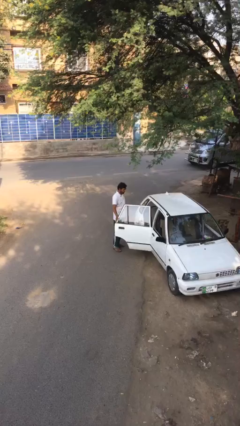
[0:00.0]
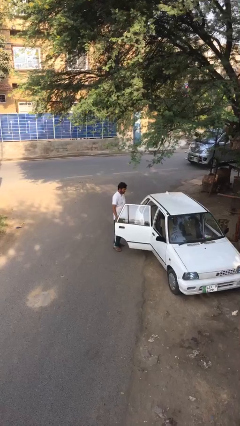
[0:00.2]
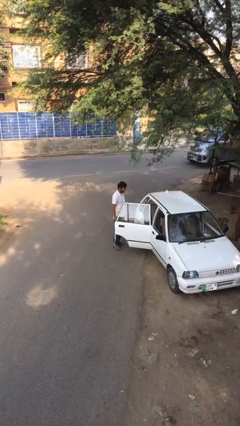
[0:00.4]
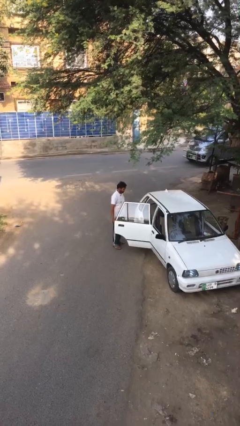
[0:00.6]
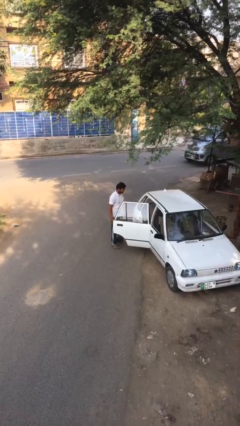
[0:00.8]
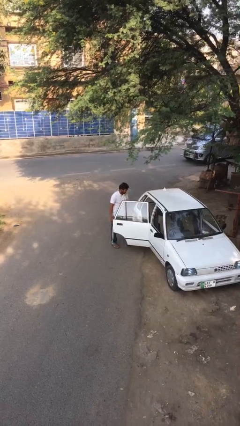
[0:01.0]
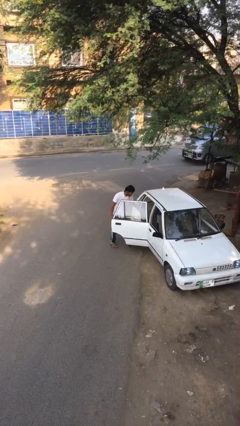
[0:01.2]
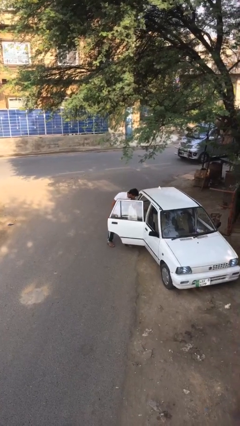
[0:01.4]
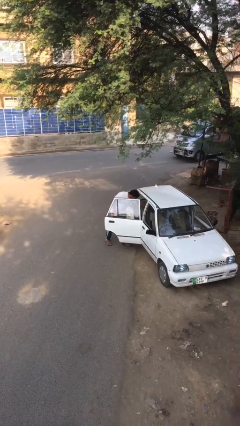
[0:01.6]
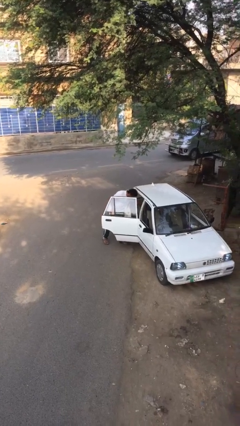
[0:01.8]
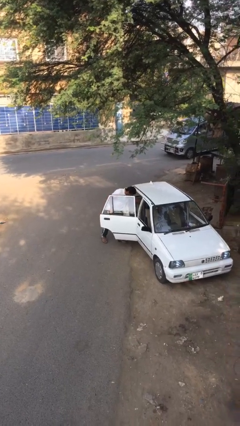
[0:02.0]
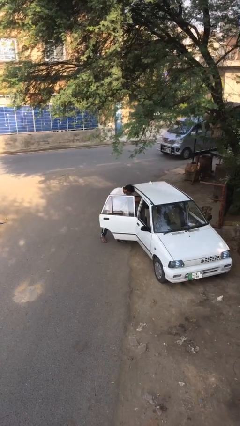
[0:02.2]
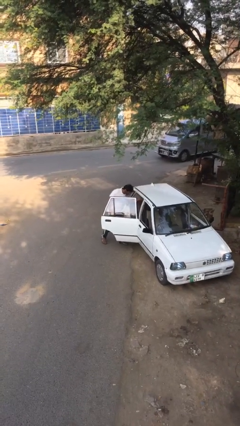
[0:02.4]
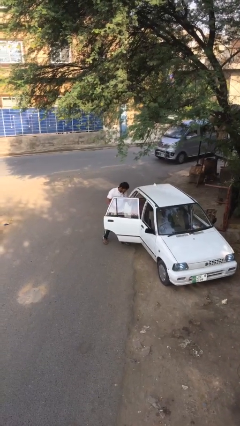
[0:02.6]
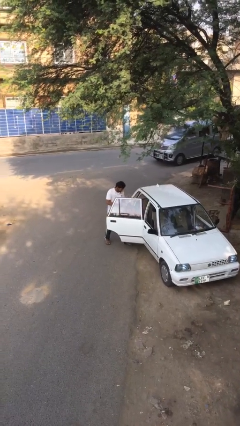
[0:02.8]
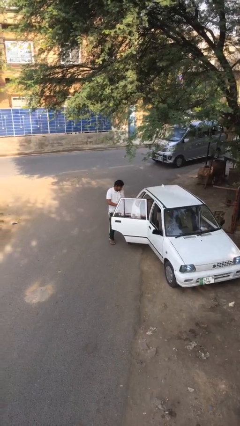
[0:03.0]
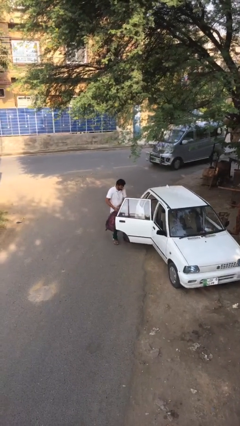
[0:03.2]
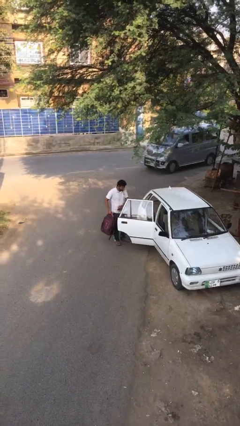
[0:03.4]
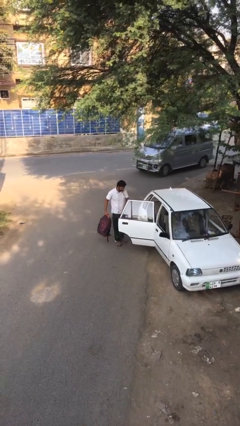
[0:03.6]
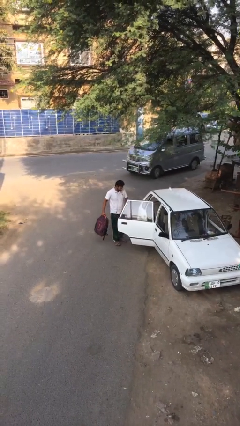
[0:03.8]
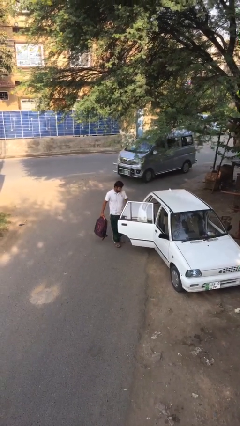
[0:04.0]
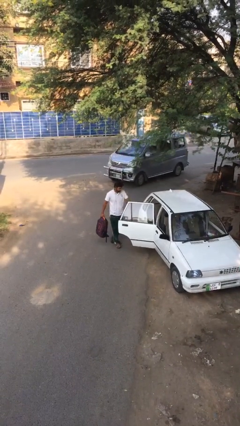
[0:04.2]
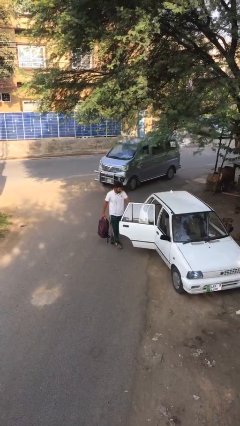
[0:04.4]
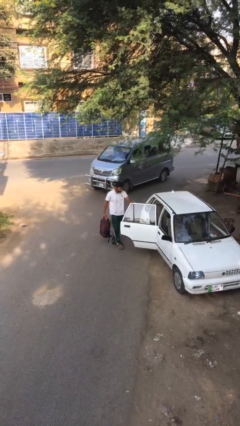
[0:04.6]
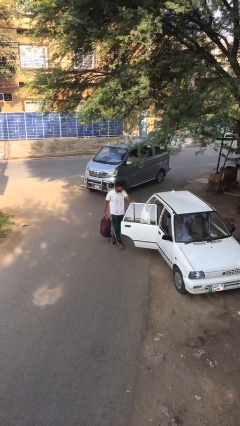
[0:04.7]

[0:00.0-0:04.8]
person unloads car

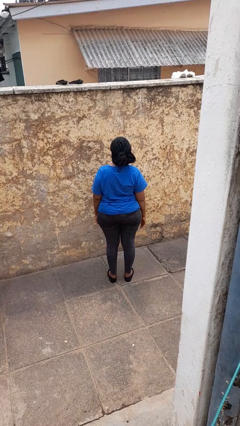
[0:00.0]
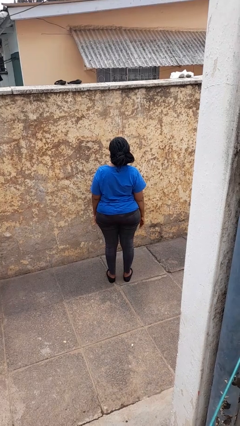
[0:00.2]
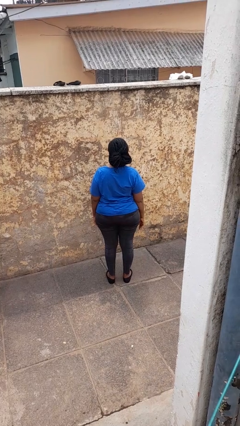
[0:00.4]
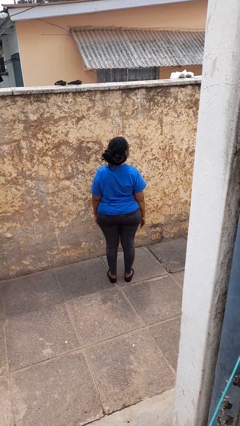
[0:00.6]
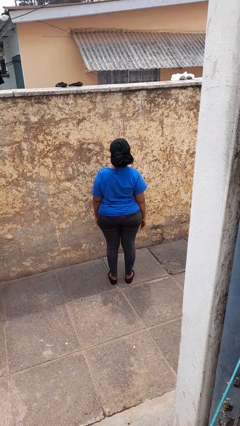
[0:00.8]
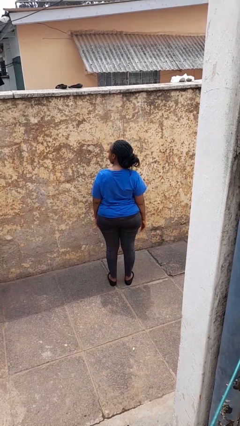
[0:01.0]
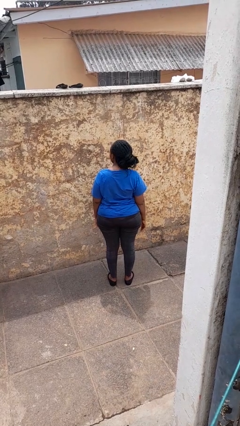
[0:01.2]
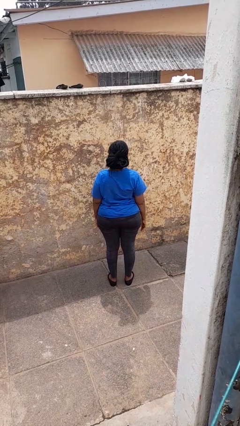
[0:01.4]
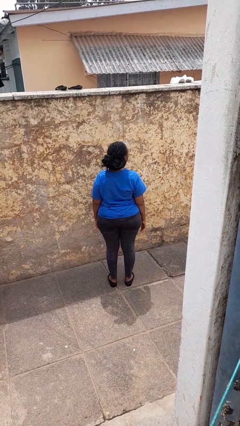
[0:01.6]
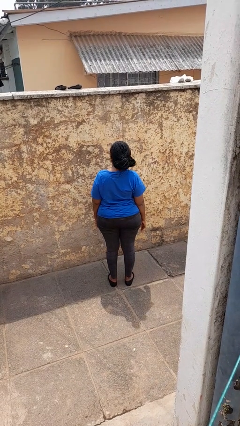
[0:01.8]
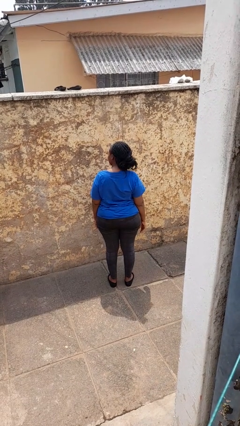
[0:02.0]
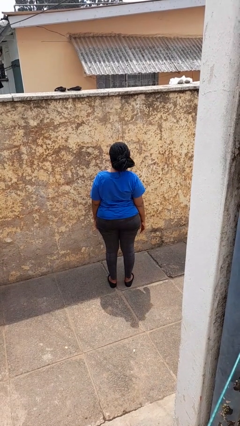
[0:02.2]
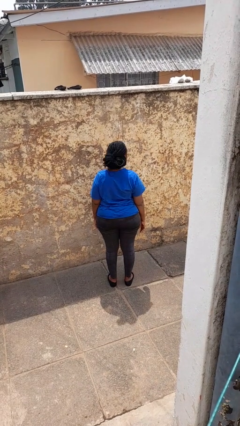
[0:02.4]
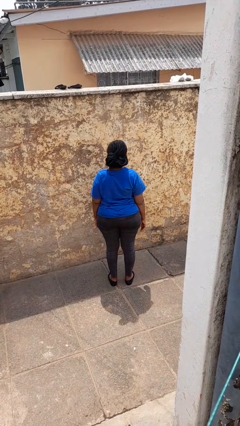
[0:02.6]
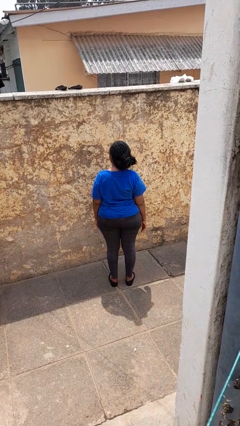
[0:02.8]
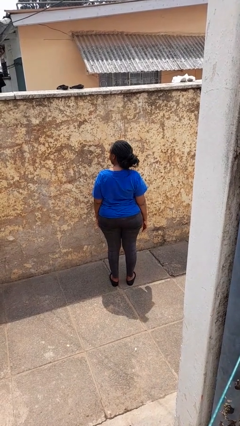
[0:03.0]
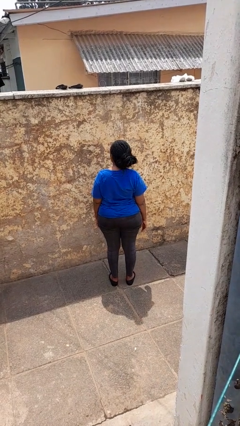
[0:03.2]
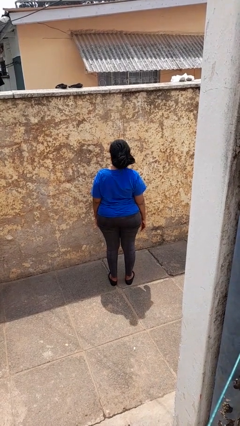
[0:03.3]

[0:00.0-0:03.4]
person shakes head

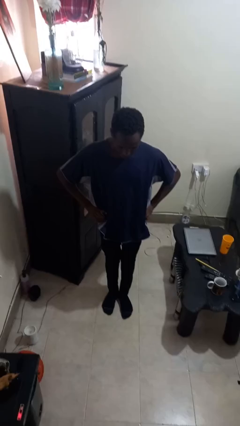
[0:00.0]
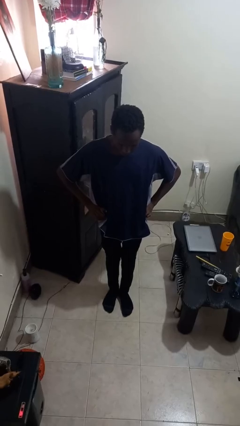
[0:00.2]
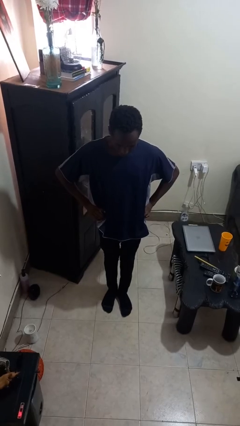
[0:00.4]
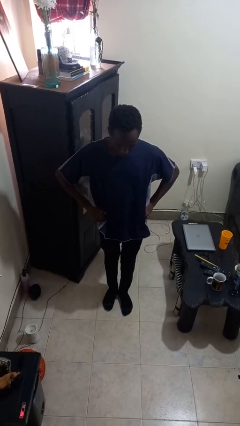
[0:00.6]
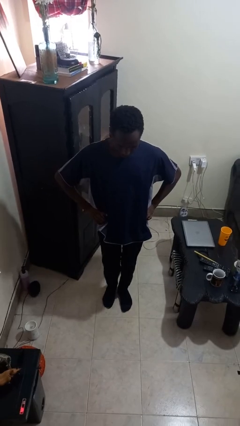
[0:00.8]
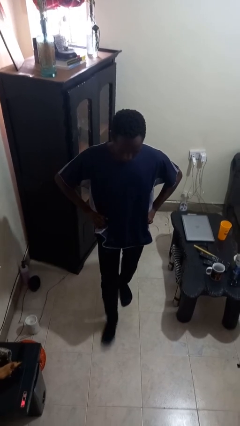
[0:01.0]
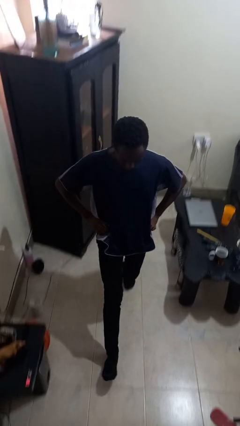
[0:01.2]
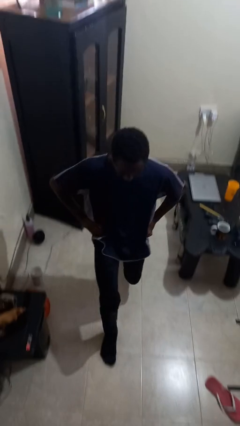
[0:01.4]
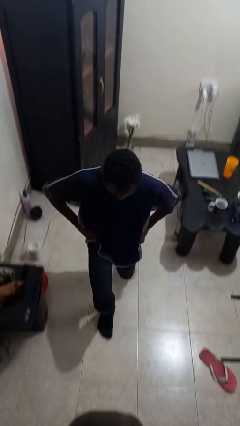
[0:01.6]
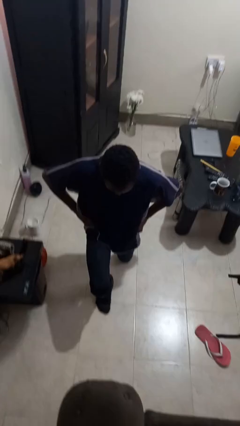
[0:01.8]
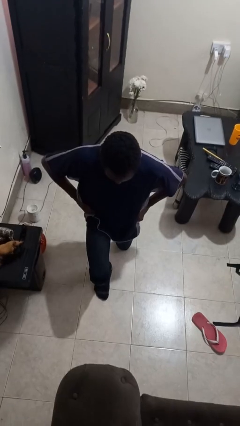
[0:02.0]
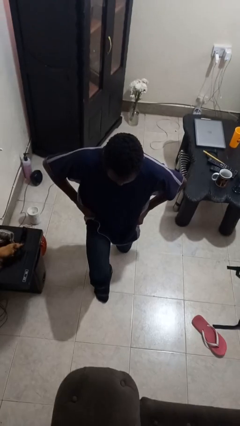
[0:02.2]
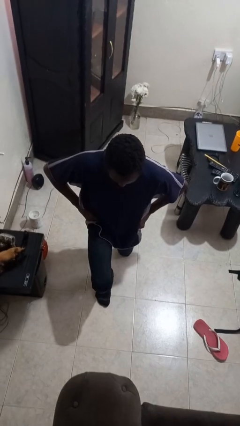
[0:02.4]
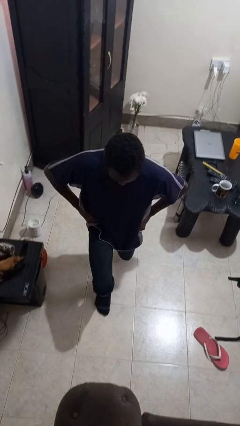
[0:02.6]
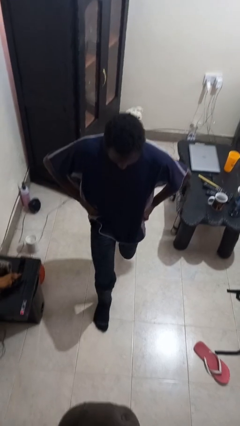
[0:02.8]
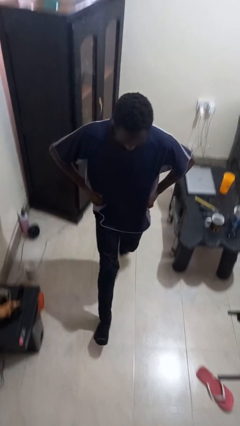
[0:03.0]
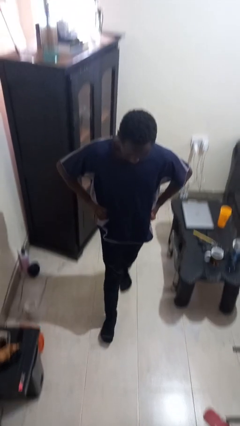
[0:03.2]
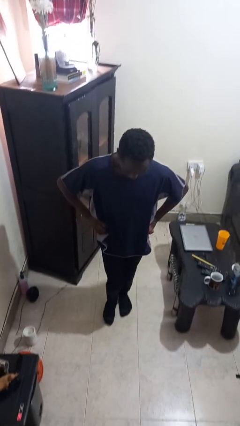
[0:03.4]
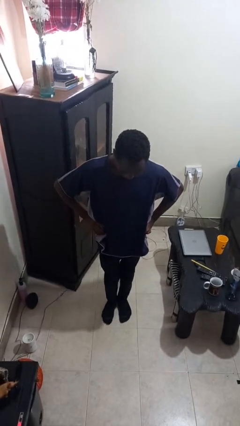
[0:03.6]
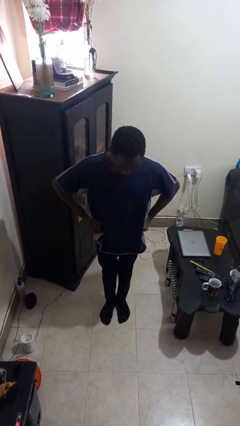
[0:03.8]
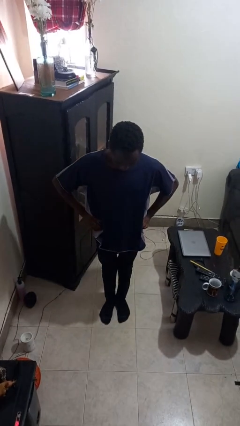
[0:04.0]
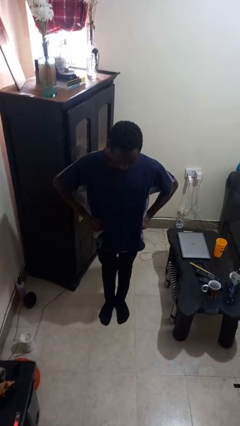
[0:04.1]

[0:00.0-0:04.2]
person exercises with lunges

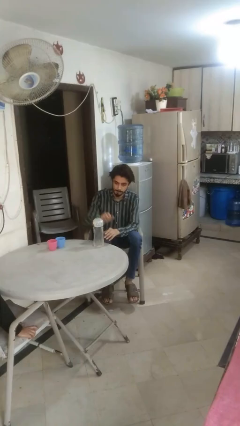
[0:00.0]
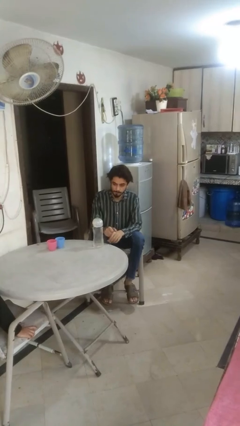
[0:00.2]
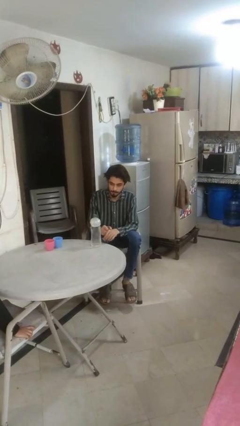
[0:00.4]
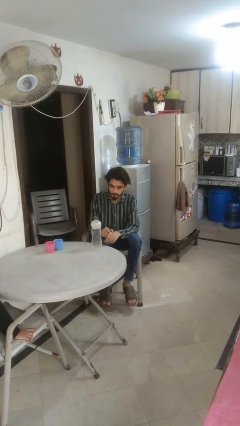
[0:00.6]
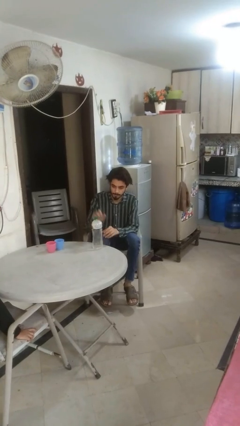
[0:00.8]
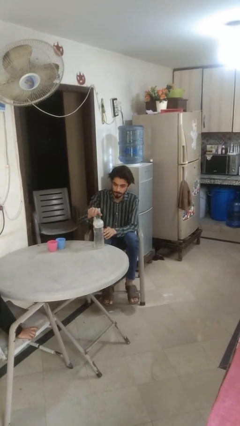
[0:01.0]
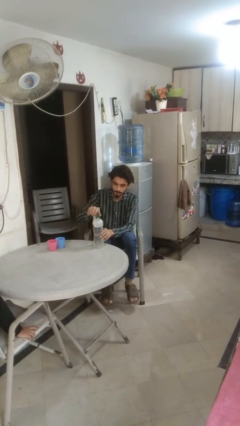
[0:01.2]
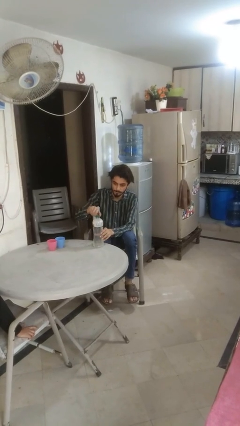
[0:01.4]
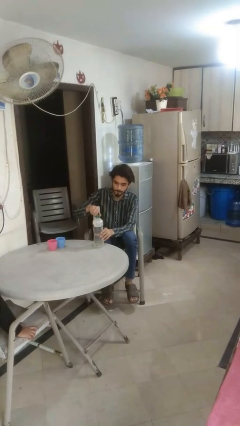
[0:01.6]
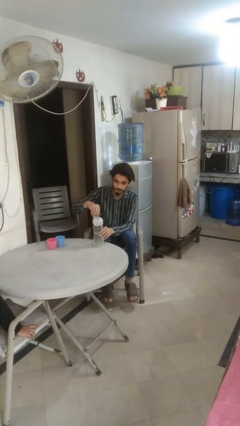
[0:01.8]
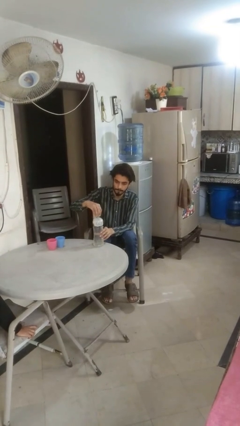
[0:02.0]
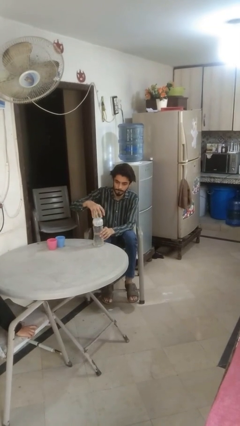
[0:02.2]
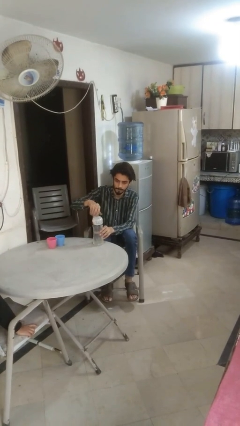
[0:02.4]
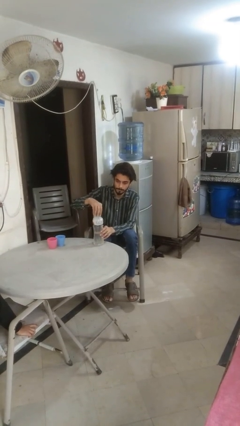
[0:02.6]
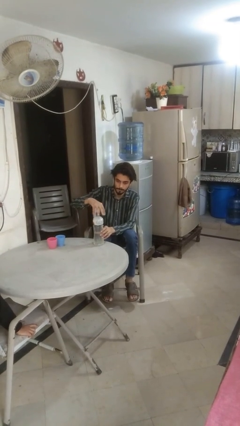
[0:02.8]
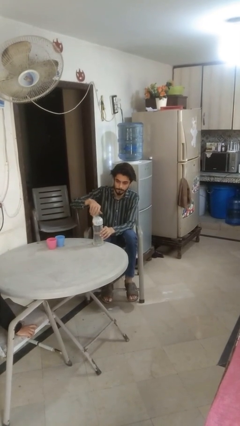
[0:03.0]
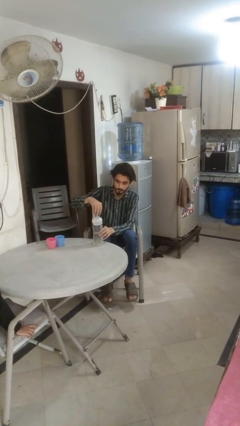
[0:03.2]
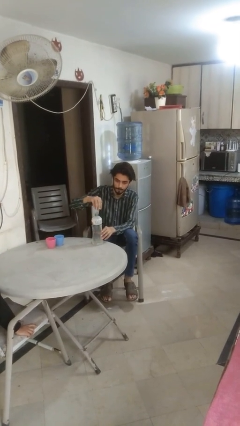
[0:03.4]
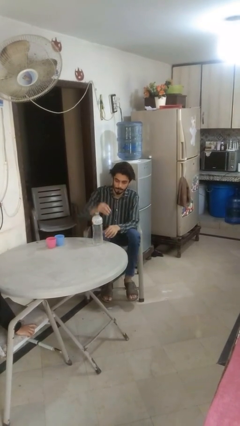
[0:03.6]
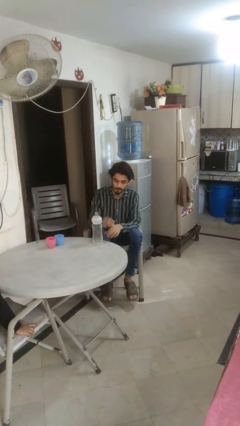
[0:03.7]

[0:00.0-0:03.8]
person unscrews lid from bottle

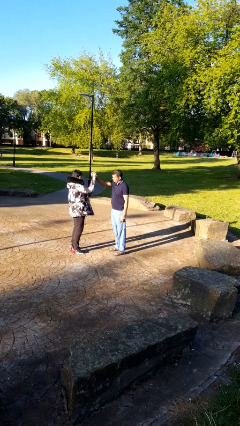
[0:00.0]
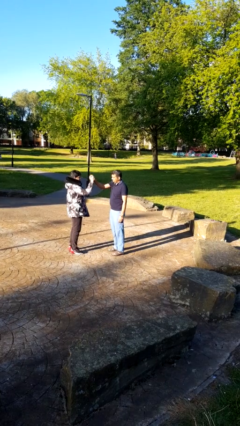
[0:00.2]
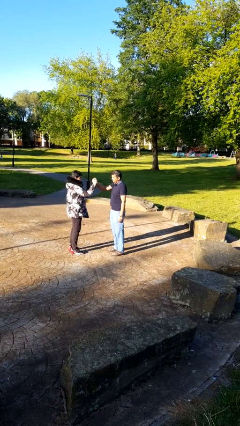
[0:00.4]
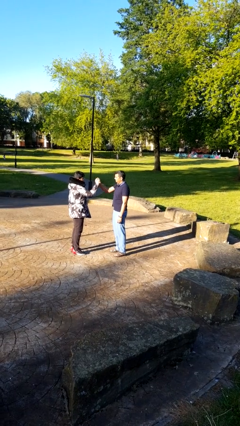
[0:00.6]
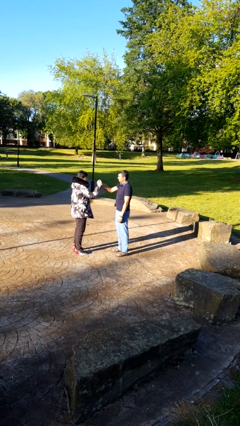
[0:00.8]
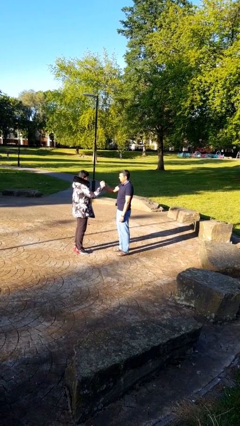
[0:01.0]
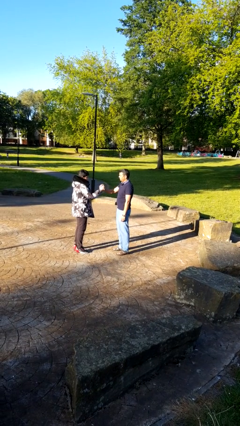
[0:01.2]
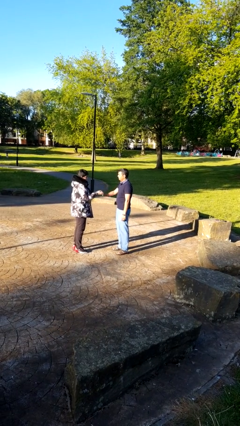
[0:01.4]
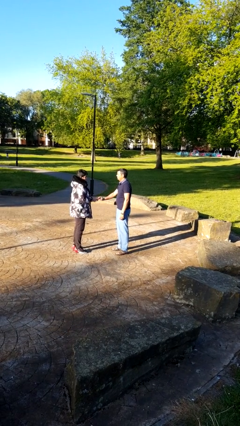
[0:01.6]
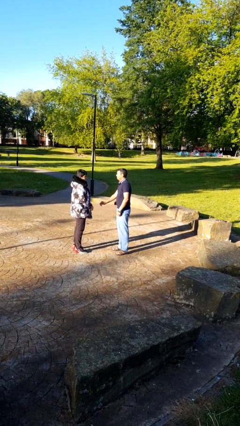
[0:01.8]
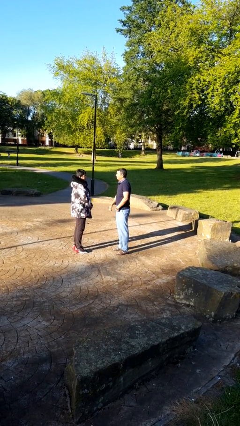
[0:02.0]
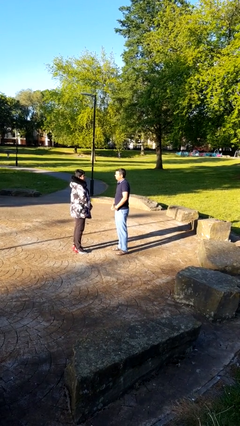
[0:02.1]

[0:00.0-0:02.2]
person highfives hand
